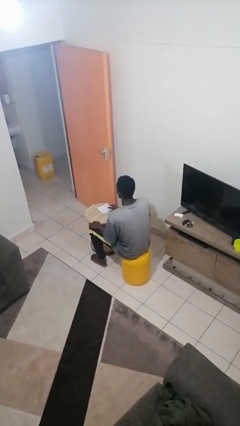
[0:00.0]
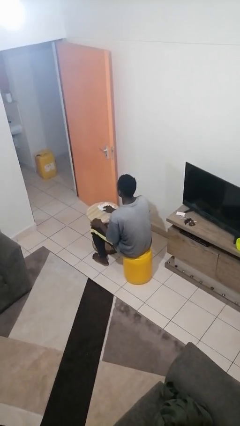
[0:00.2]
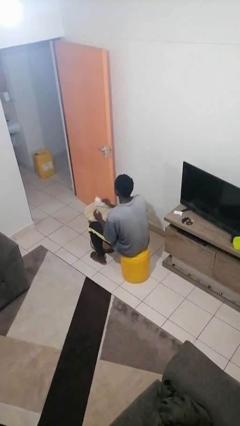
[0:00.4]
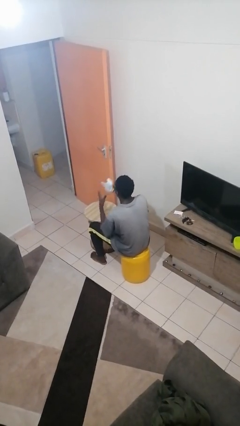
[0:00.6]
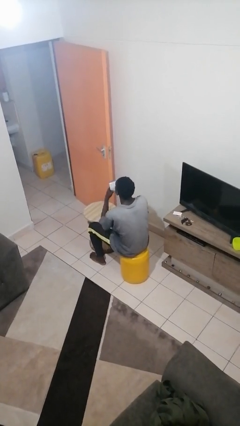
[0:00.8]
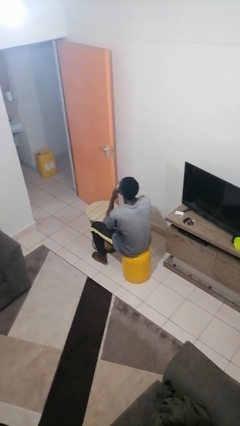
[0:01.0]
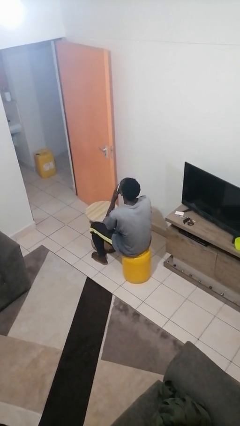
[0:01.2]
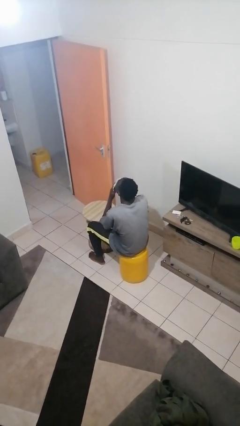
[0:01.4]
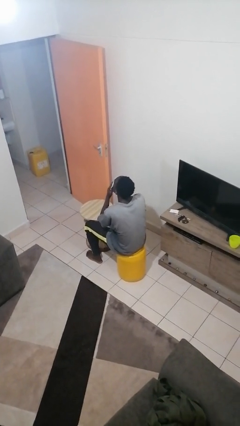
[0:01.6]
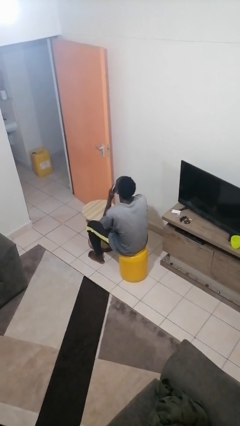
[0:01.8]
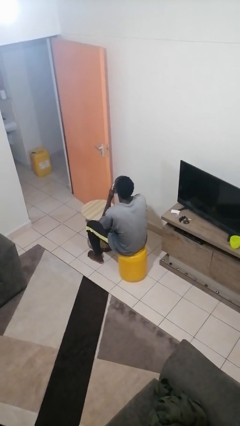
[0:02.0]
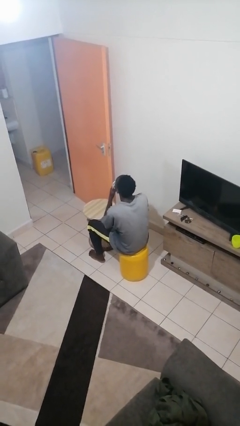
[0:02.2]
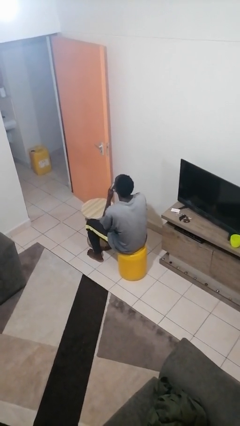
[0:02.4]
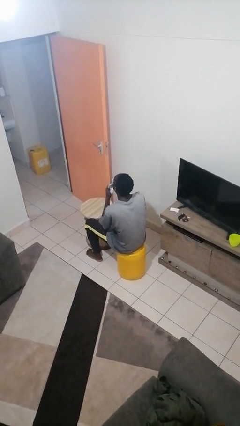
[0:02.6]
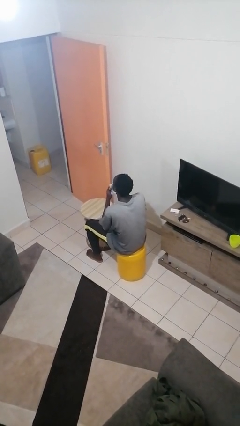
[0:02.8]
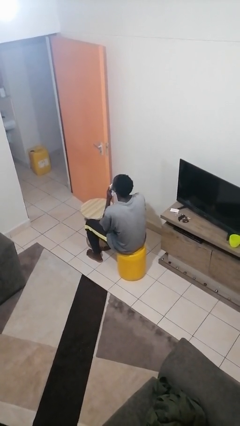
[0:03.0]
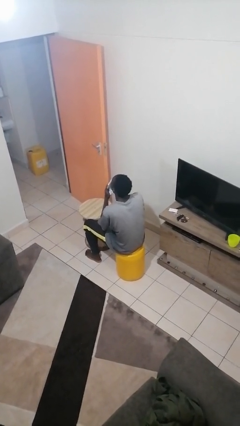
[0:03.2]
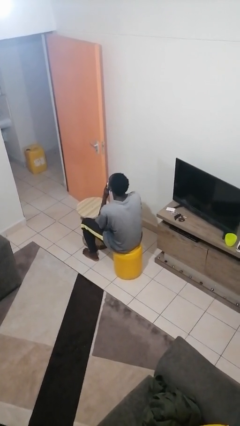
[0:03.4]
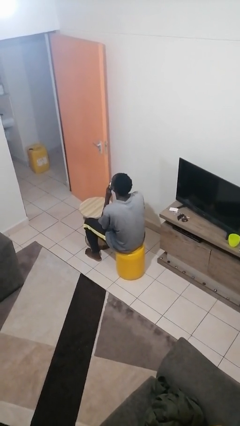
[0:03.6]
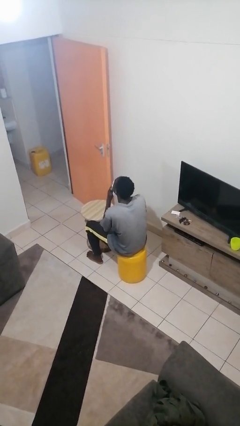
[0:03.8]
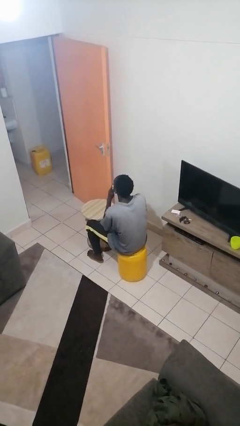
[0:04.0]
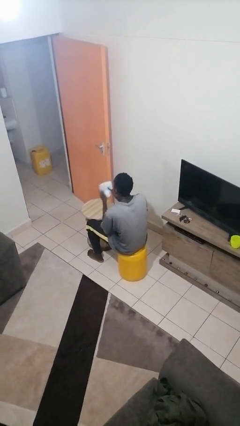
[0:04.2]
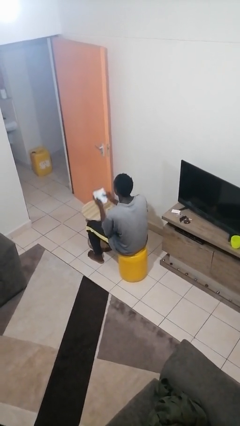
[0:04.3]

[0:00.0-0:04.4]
person wipes mouth with napkin

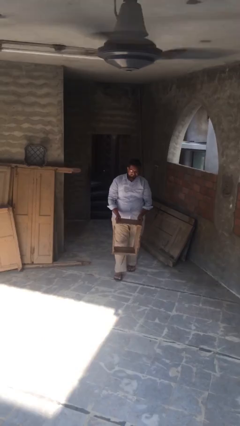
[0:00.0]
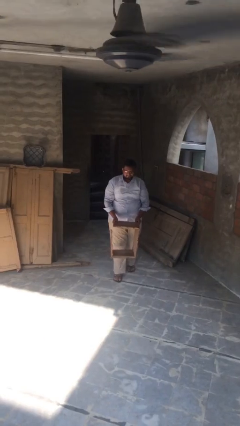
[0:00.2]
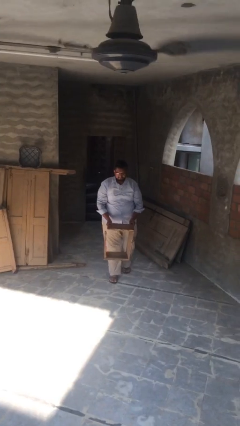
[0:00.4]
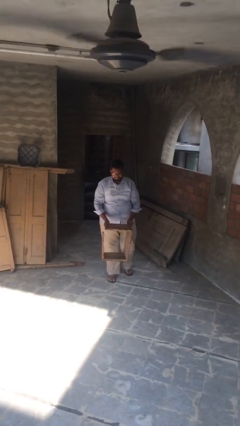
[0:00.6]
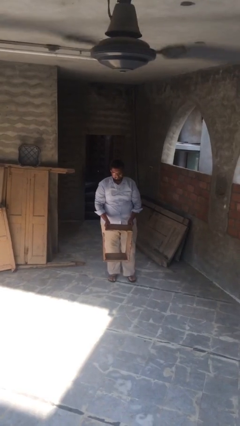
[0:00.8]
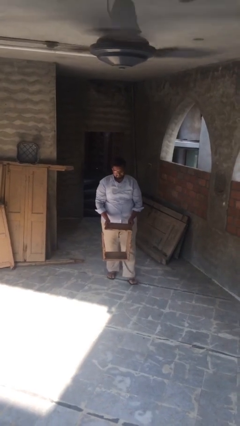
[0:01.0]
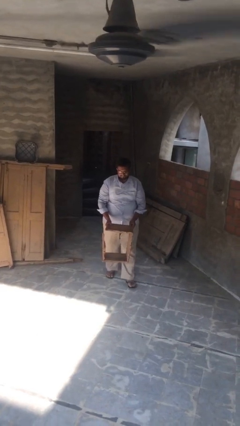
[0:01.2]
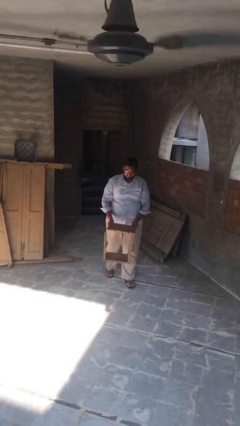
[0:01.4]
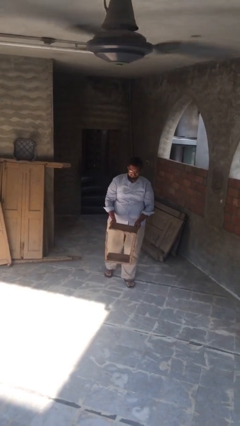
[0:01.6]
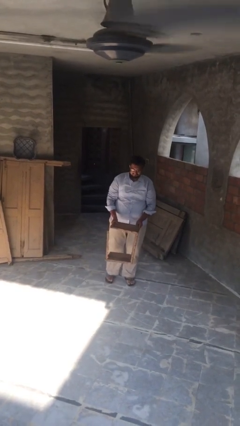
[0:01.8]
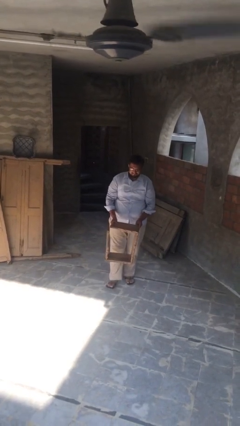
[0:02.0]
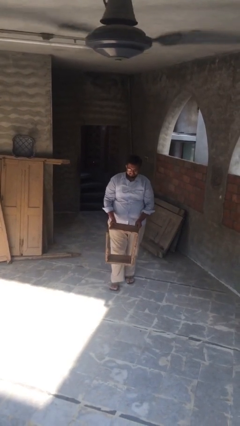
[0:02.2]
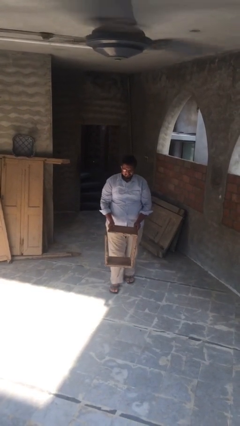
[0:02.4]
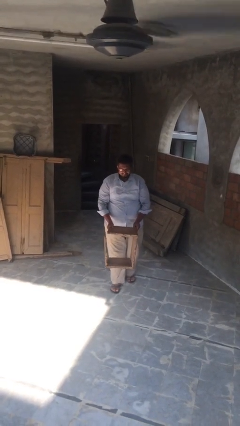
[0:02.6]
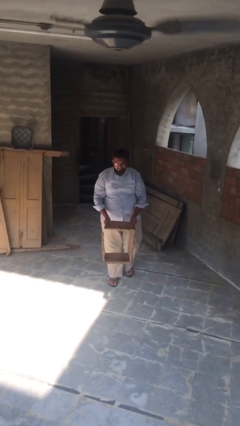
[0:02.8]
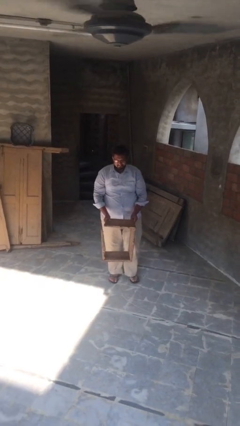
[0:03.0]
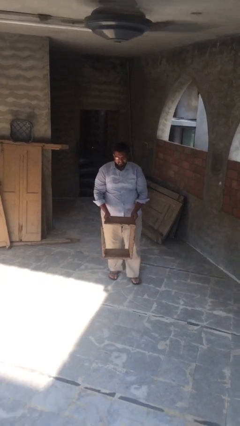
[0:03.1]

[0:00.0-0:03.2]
person carries heavy object

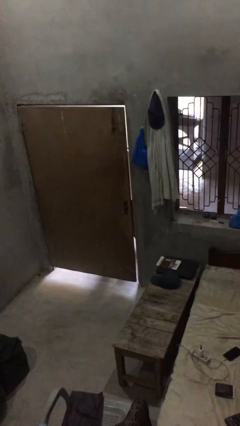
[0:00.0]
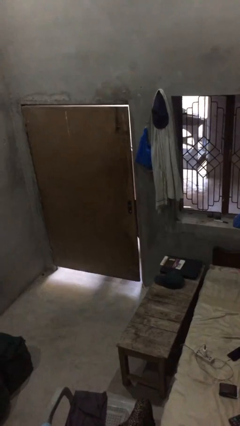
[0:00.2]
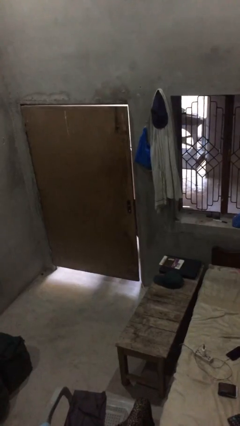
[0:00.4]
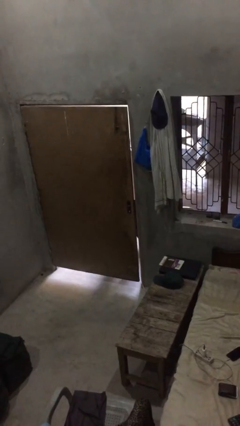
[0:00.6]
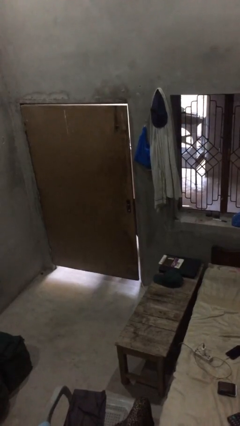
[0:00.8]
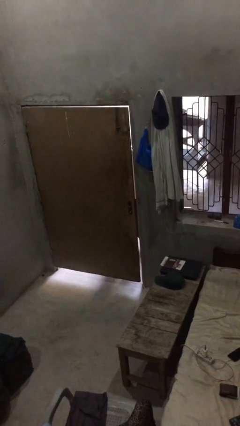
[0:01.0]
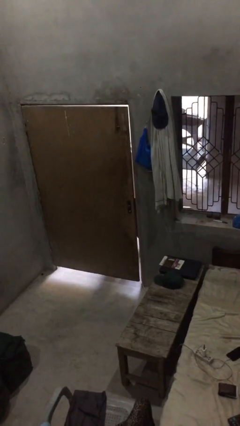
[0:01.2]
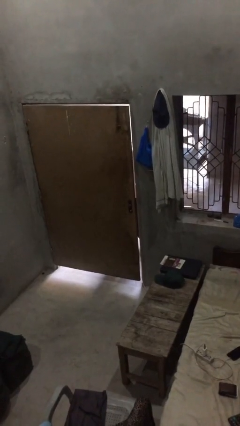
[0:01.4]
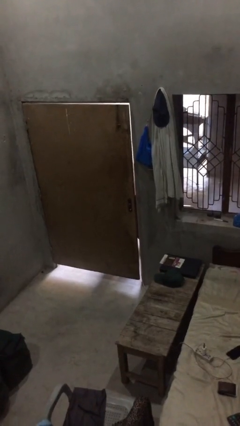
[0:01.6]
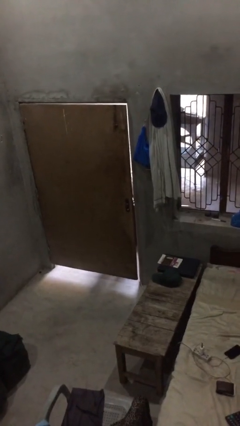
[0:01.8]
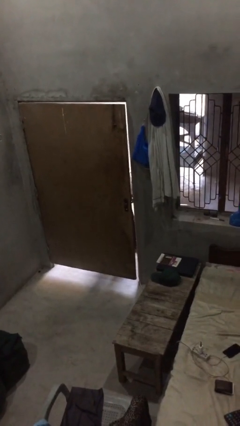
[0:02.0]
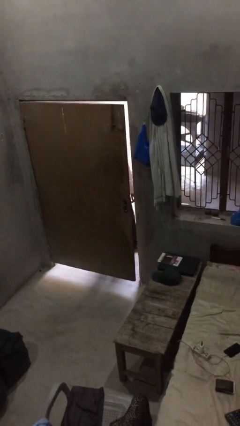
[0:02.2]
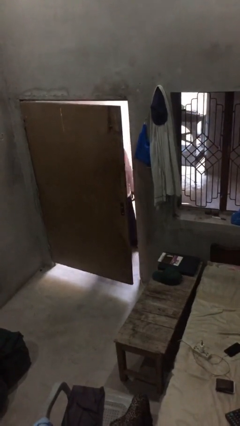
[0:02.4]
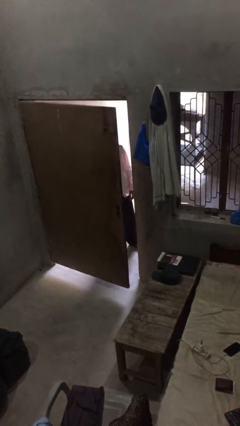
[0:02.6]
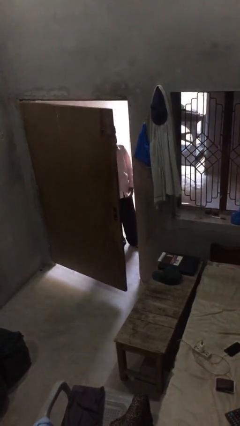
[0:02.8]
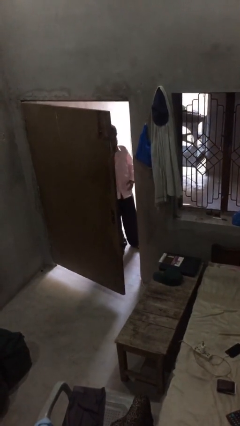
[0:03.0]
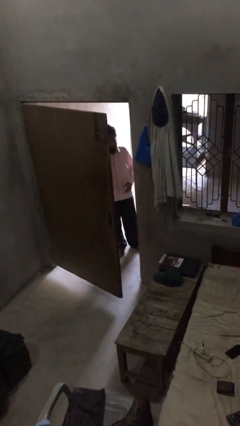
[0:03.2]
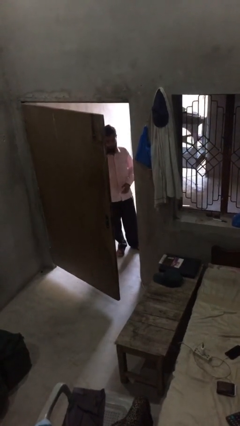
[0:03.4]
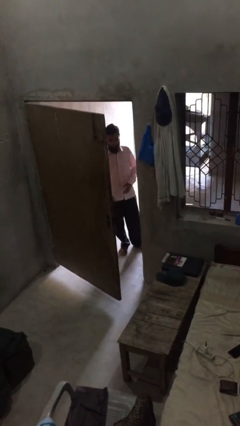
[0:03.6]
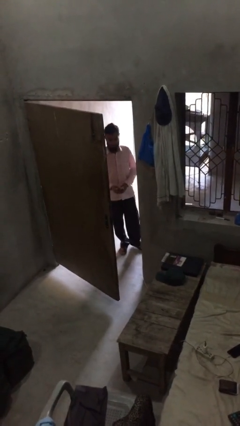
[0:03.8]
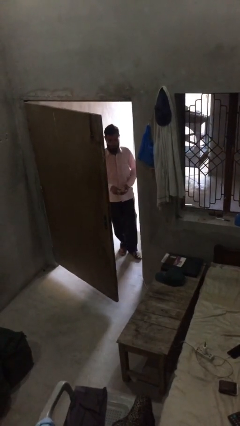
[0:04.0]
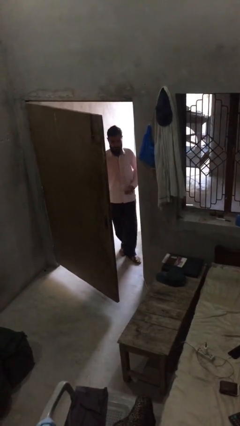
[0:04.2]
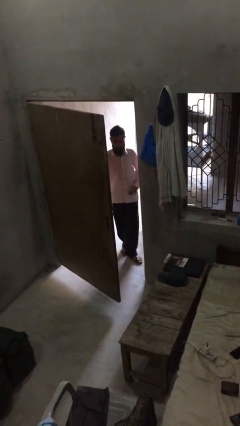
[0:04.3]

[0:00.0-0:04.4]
person opens facility door

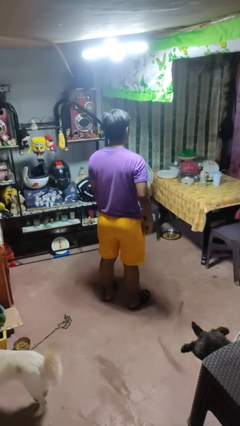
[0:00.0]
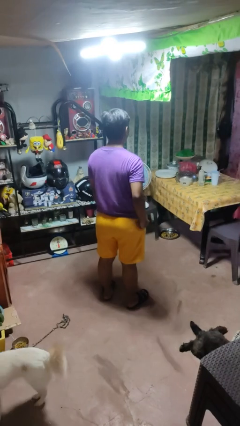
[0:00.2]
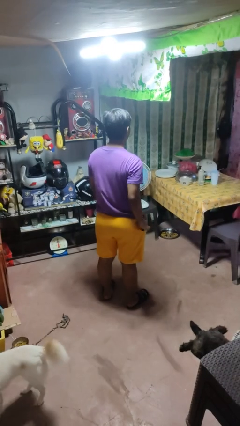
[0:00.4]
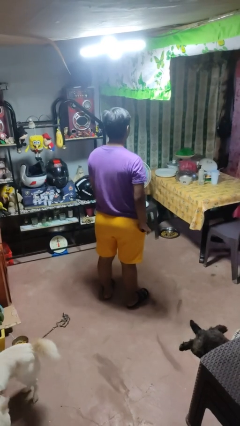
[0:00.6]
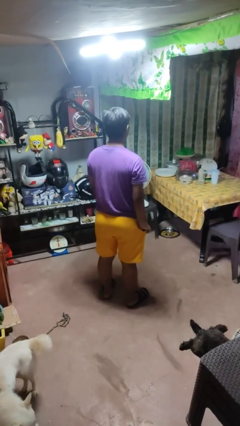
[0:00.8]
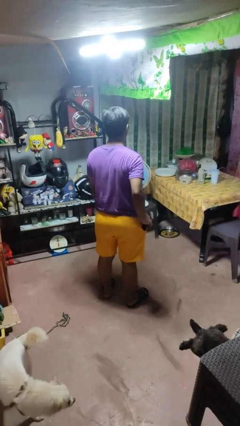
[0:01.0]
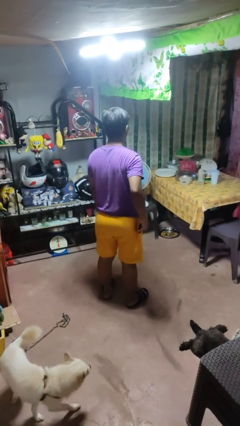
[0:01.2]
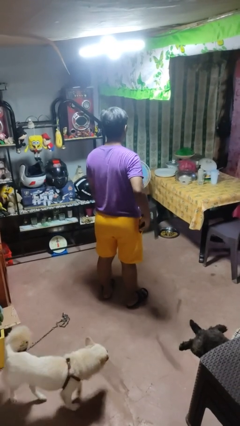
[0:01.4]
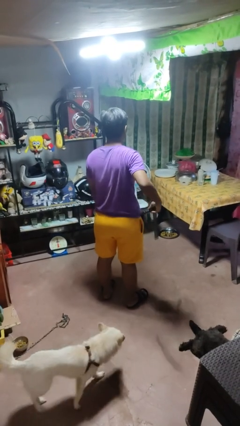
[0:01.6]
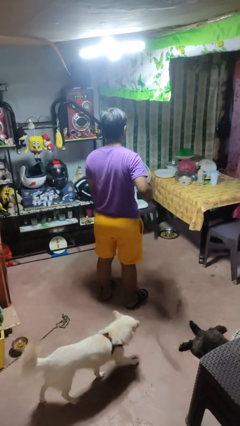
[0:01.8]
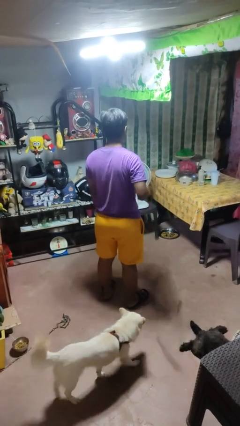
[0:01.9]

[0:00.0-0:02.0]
person takes phone from pocket

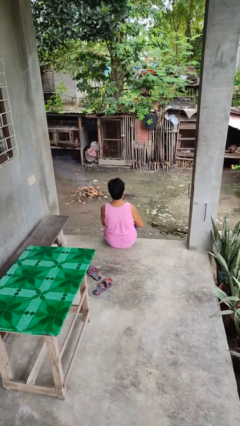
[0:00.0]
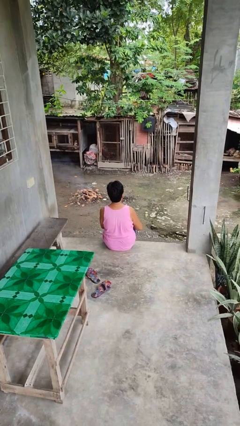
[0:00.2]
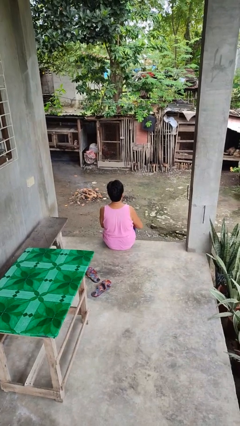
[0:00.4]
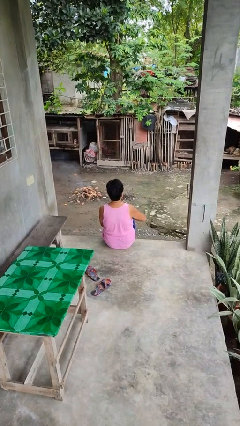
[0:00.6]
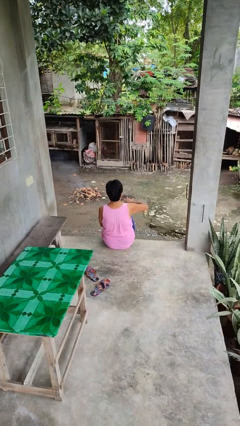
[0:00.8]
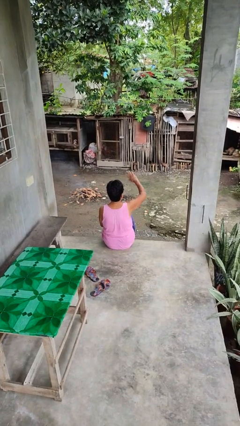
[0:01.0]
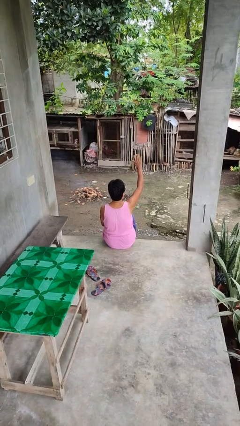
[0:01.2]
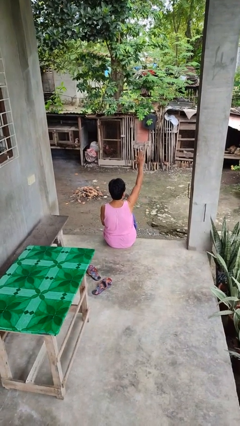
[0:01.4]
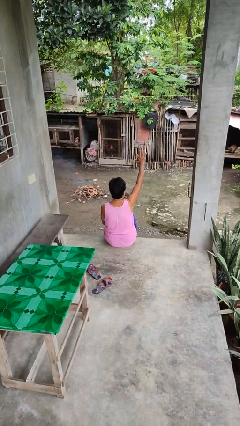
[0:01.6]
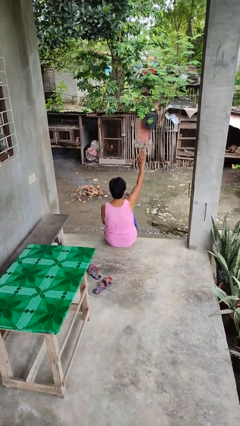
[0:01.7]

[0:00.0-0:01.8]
person gestures swipe up

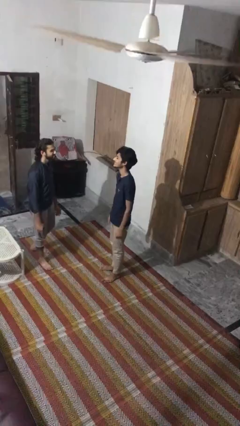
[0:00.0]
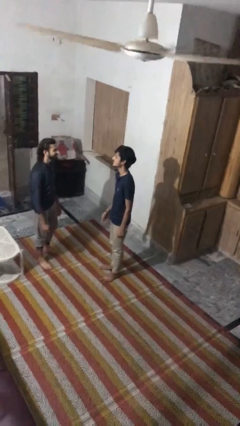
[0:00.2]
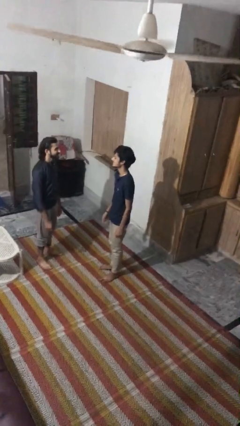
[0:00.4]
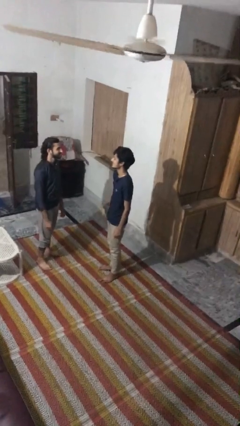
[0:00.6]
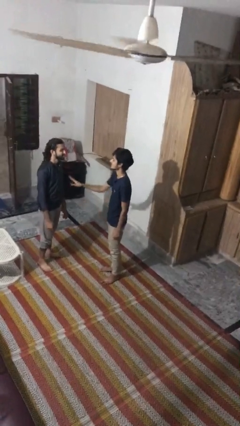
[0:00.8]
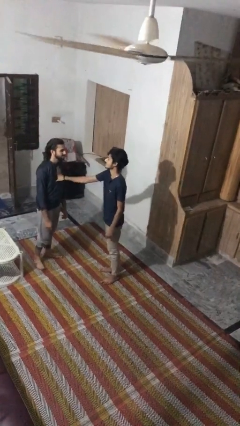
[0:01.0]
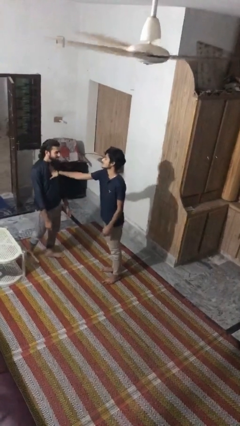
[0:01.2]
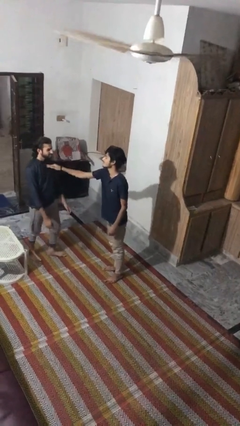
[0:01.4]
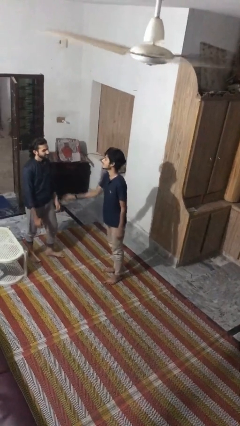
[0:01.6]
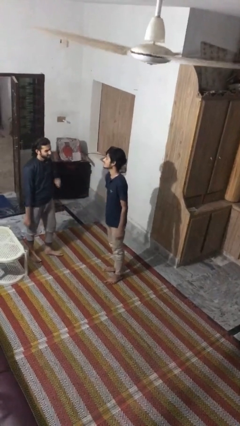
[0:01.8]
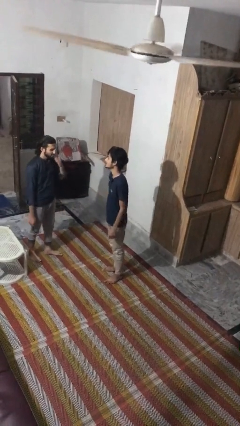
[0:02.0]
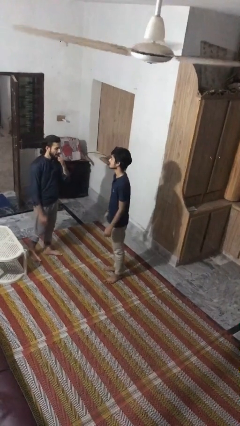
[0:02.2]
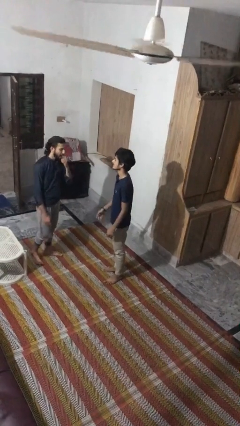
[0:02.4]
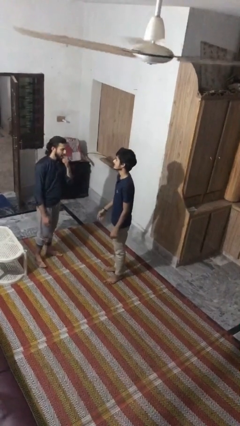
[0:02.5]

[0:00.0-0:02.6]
person shoves person
